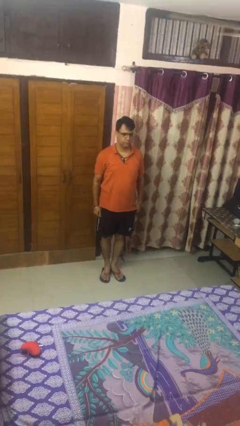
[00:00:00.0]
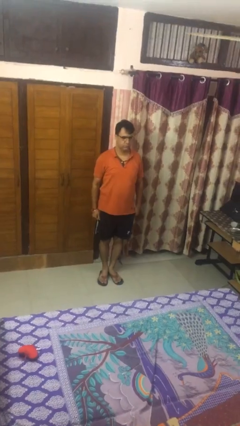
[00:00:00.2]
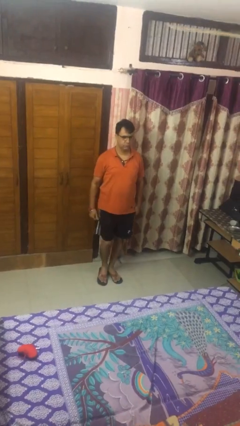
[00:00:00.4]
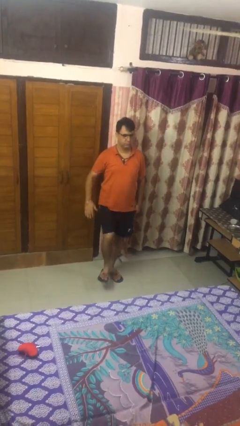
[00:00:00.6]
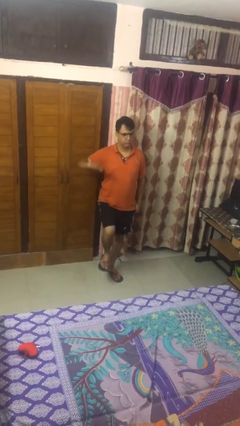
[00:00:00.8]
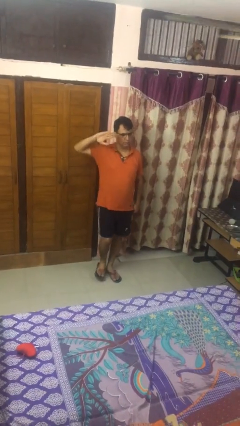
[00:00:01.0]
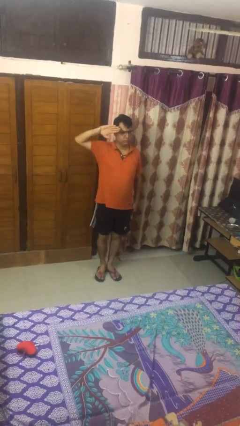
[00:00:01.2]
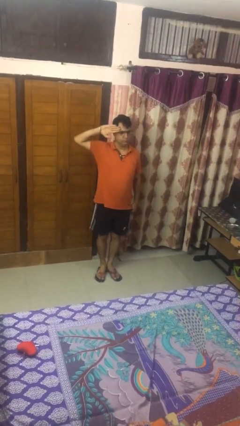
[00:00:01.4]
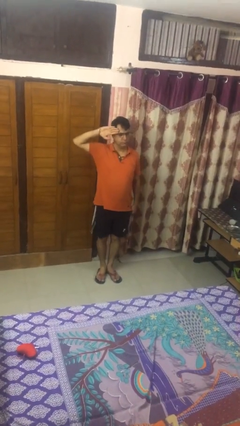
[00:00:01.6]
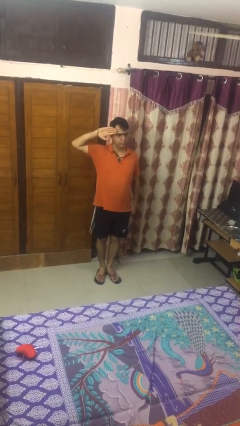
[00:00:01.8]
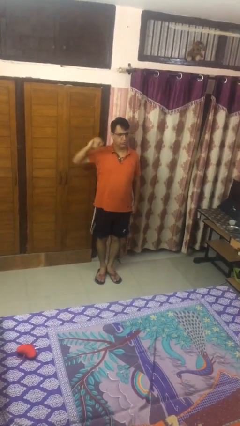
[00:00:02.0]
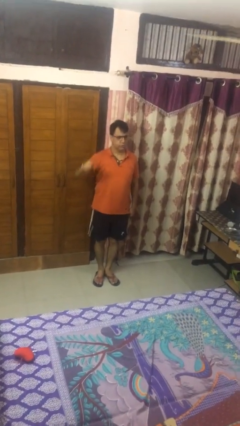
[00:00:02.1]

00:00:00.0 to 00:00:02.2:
person salutes

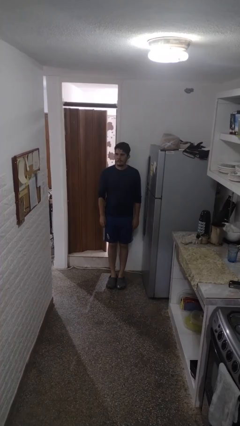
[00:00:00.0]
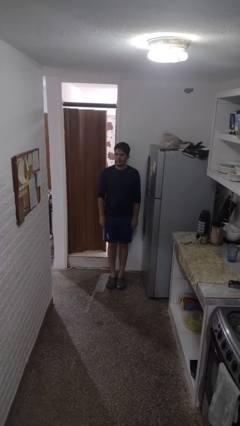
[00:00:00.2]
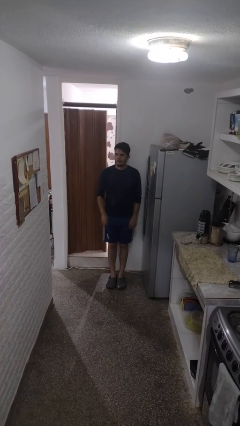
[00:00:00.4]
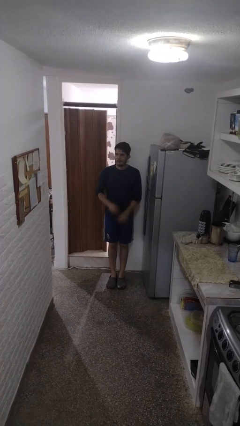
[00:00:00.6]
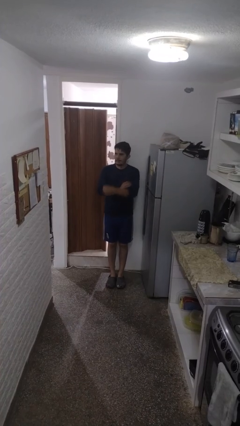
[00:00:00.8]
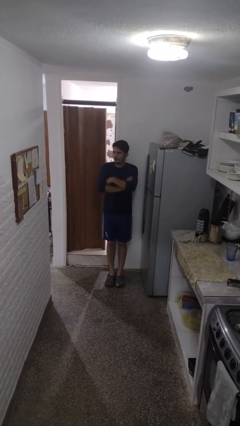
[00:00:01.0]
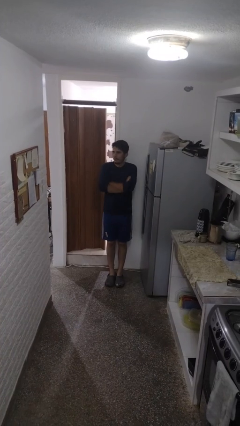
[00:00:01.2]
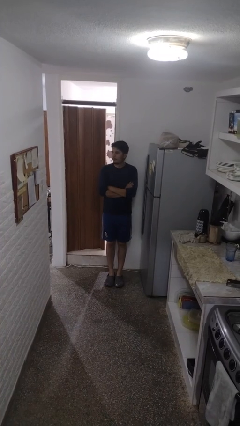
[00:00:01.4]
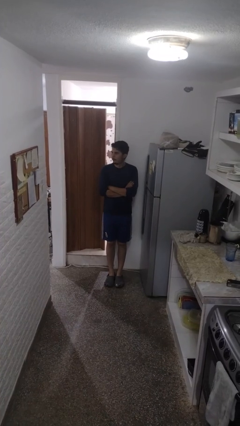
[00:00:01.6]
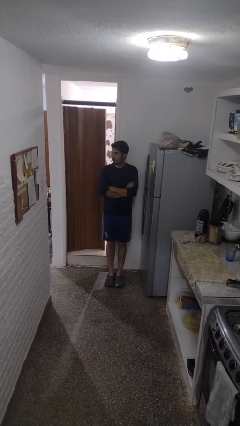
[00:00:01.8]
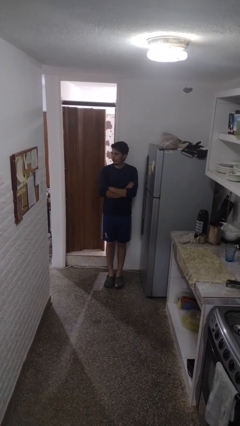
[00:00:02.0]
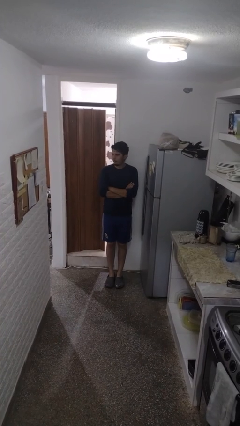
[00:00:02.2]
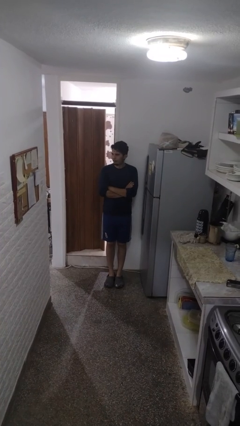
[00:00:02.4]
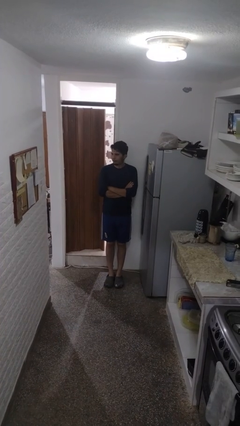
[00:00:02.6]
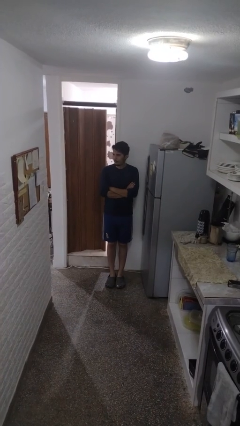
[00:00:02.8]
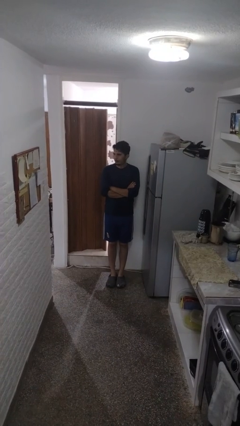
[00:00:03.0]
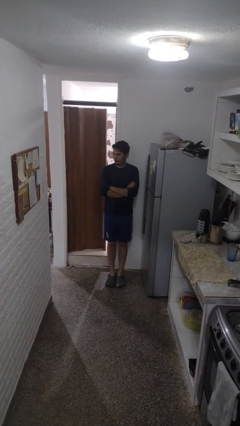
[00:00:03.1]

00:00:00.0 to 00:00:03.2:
person crosses arms

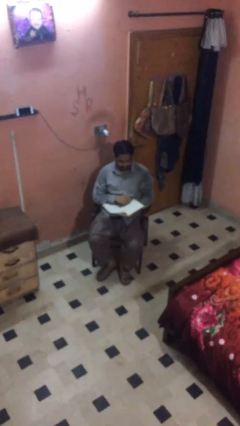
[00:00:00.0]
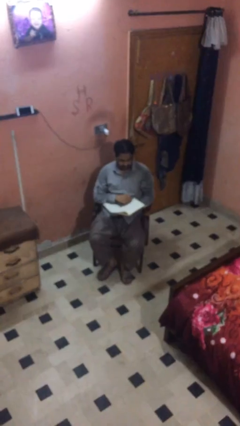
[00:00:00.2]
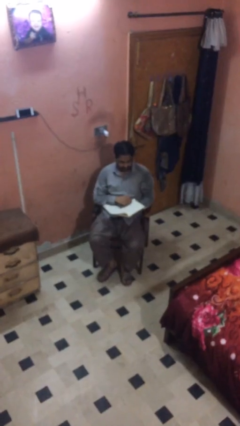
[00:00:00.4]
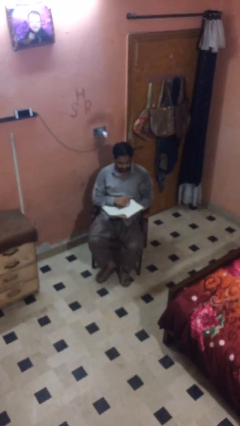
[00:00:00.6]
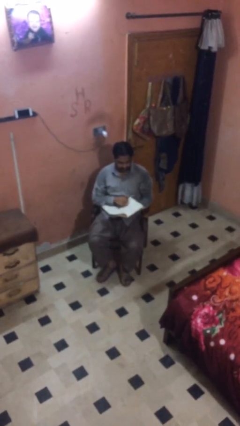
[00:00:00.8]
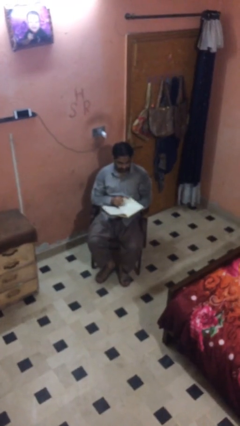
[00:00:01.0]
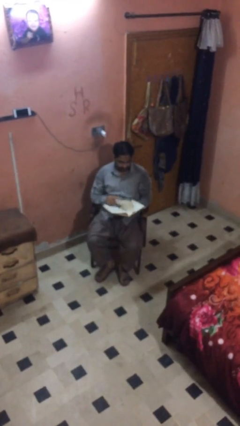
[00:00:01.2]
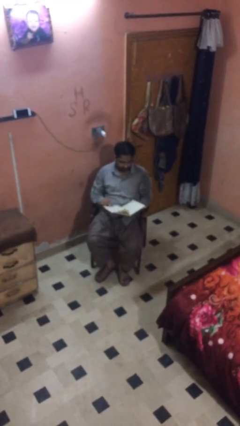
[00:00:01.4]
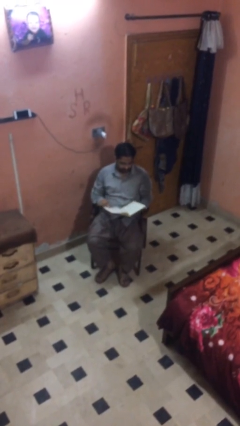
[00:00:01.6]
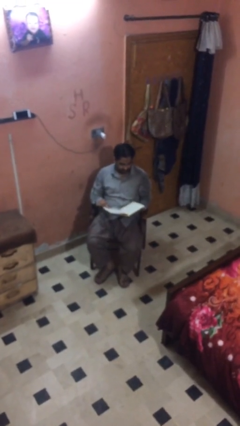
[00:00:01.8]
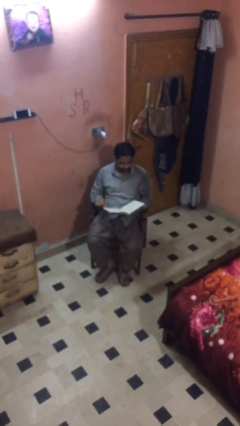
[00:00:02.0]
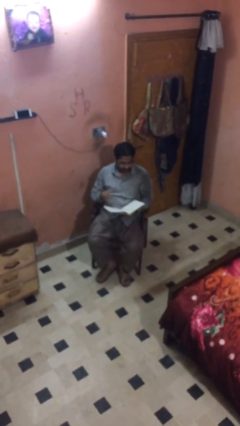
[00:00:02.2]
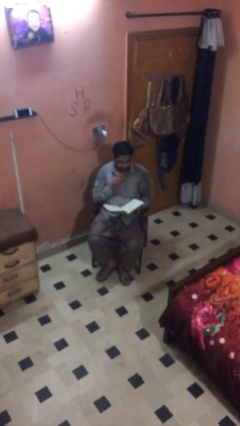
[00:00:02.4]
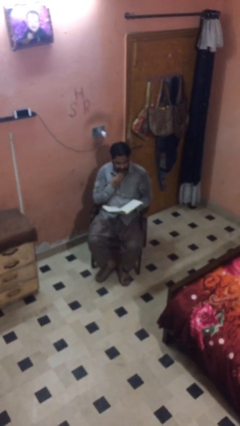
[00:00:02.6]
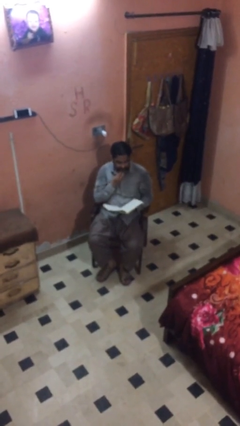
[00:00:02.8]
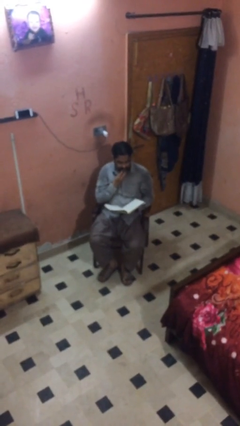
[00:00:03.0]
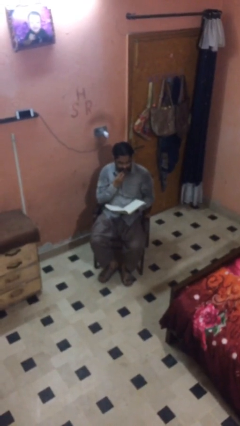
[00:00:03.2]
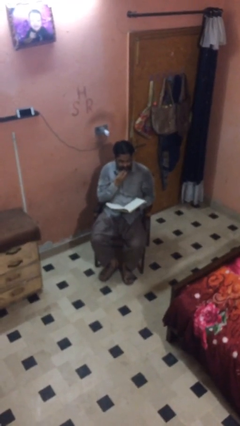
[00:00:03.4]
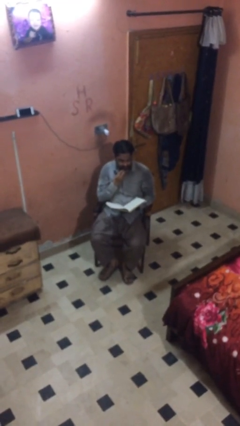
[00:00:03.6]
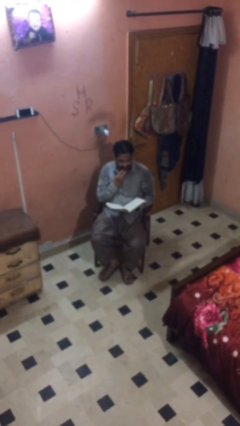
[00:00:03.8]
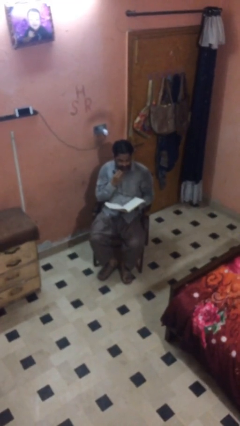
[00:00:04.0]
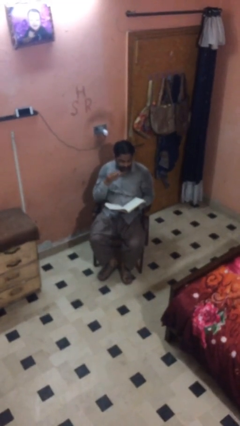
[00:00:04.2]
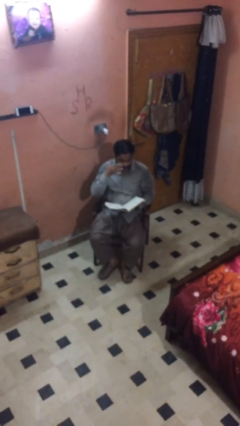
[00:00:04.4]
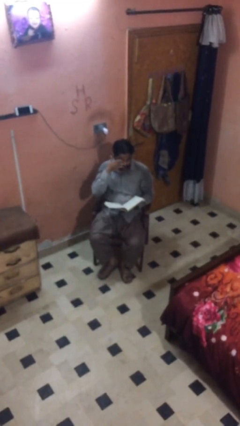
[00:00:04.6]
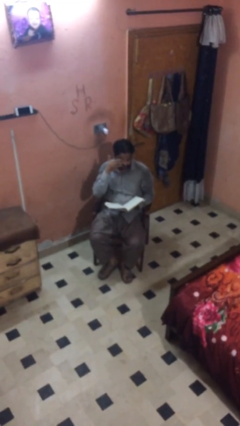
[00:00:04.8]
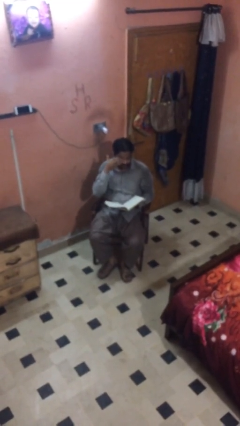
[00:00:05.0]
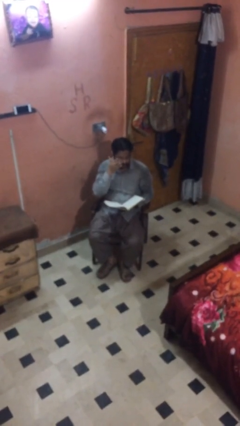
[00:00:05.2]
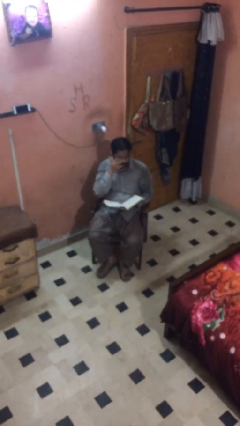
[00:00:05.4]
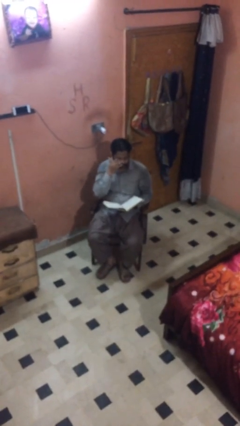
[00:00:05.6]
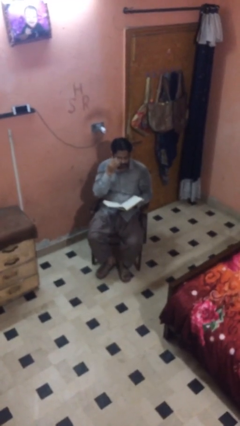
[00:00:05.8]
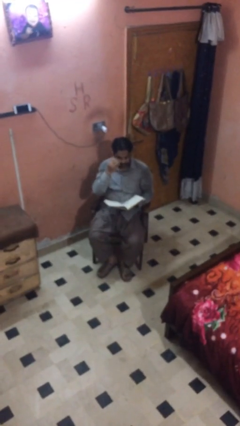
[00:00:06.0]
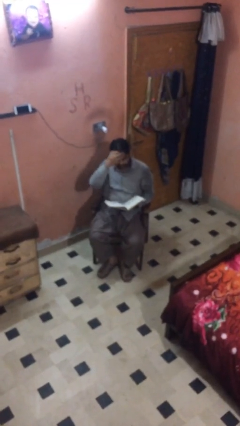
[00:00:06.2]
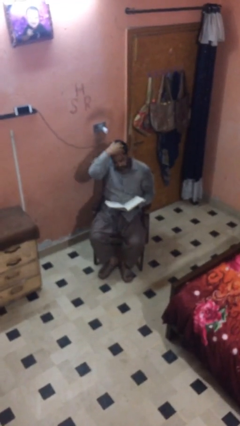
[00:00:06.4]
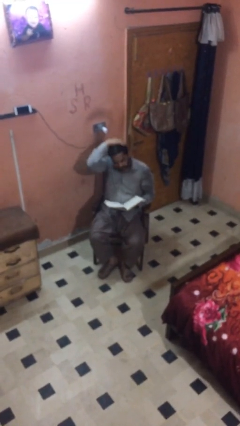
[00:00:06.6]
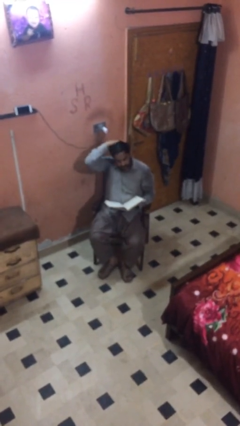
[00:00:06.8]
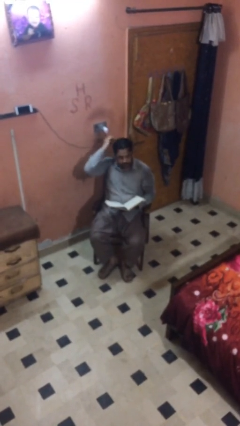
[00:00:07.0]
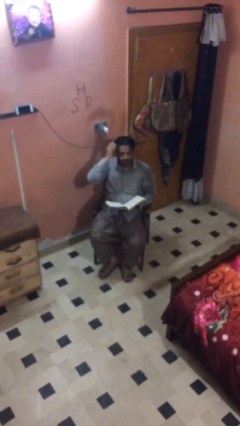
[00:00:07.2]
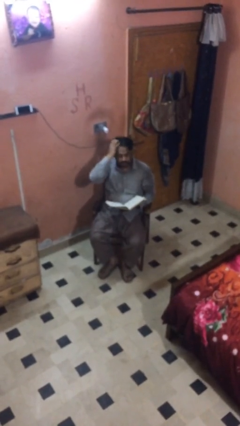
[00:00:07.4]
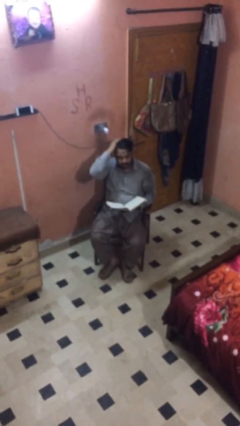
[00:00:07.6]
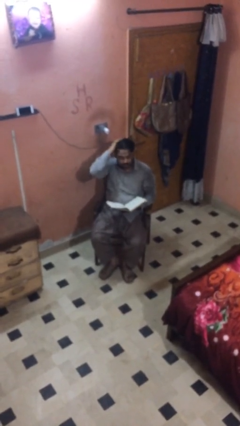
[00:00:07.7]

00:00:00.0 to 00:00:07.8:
person reads document

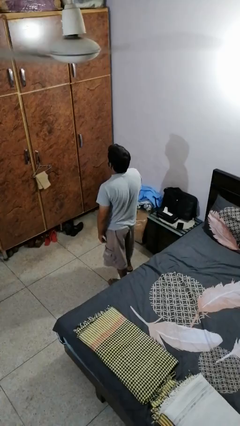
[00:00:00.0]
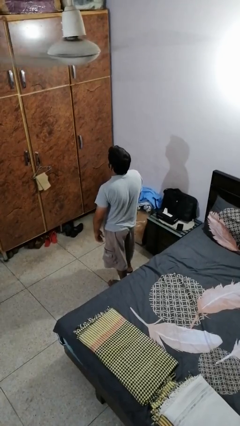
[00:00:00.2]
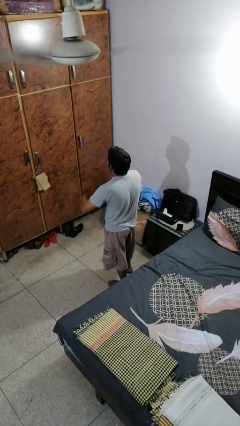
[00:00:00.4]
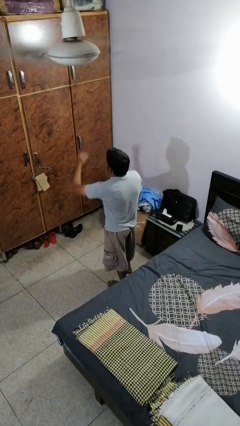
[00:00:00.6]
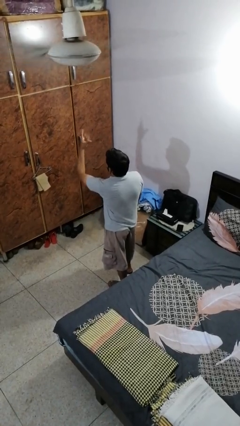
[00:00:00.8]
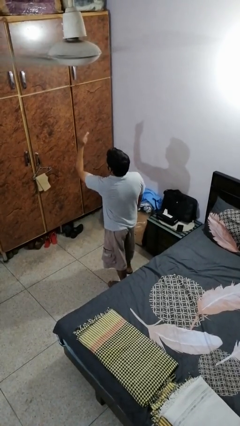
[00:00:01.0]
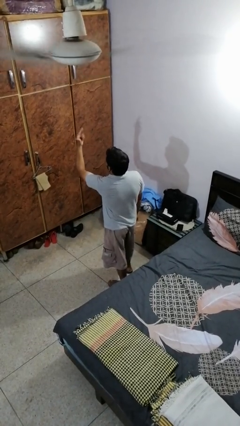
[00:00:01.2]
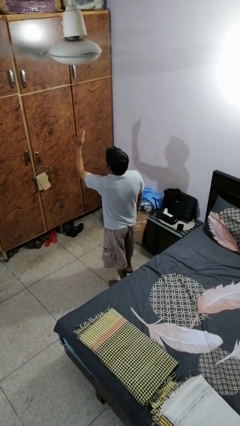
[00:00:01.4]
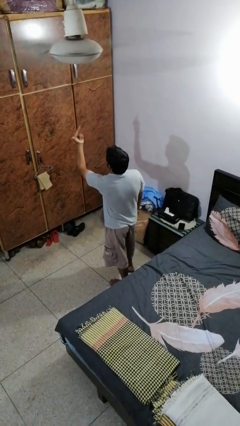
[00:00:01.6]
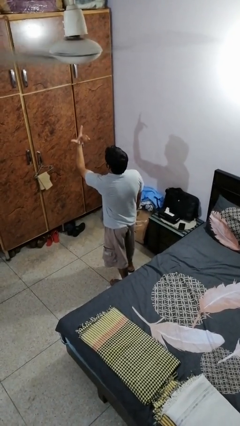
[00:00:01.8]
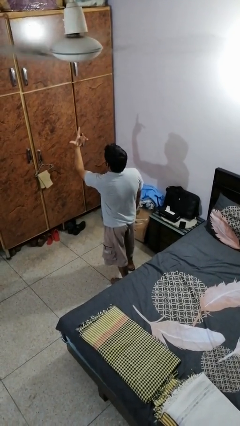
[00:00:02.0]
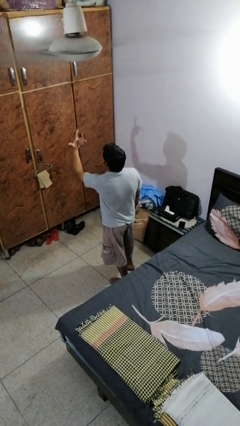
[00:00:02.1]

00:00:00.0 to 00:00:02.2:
person snaps fingers

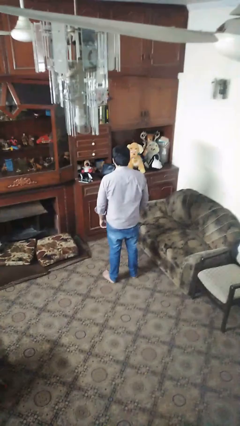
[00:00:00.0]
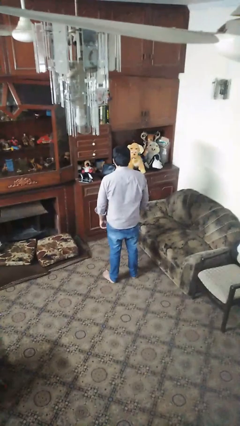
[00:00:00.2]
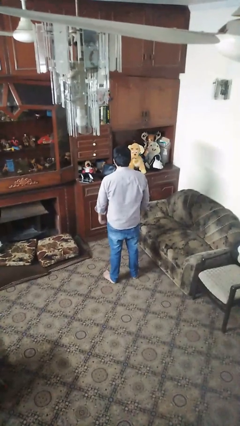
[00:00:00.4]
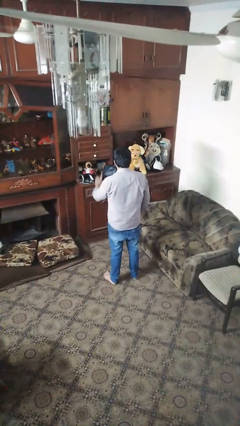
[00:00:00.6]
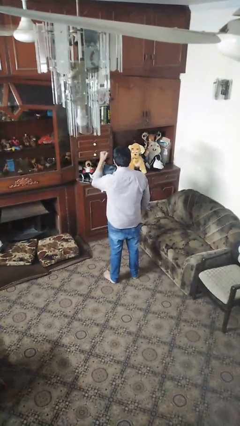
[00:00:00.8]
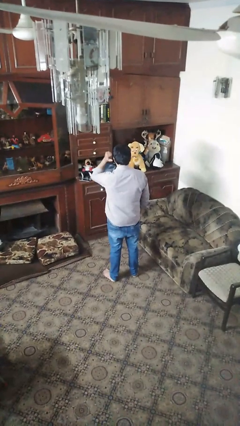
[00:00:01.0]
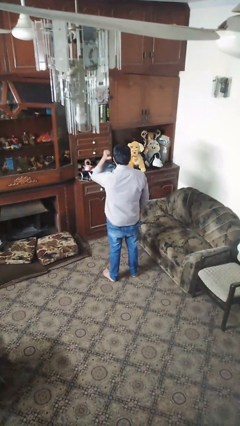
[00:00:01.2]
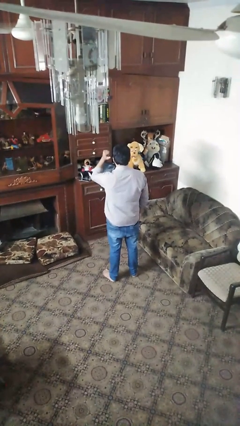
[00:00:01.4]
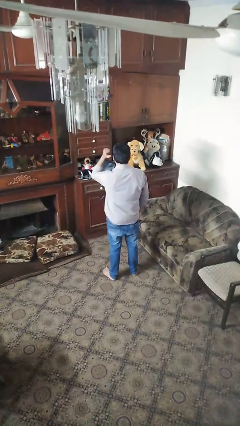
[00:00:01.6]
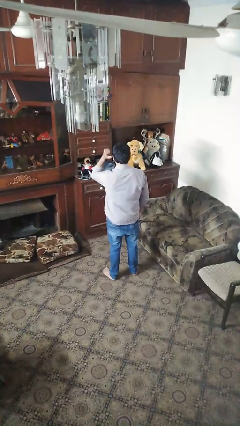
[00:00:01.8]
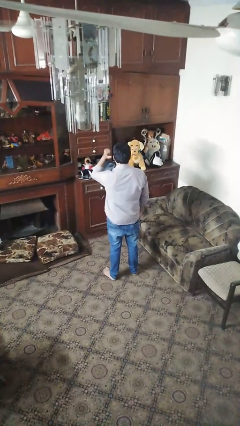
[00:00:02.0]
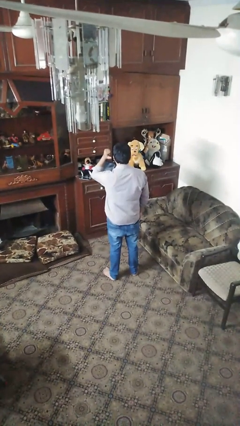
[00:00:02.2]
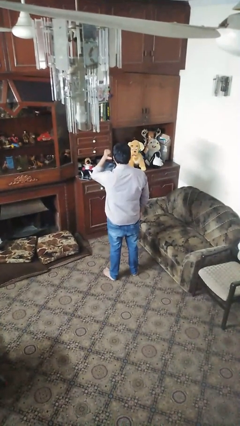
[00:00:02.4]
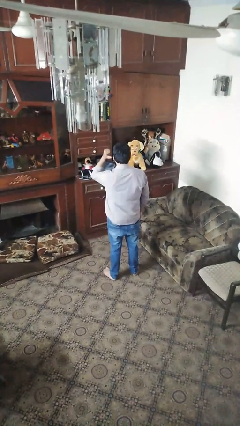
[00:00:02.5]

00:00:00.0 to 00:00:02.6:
person gestures behind me
